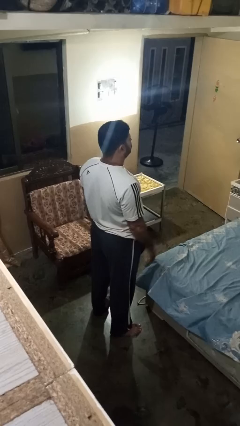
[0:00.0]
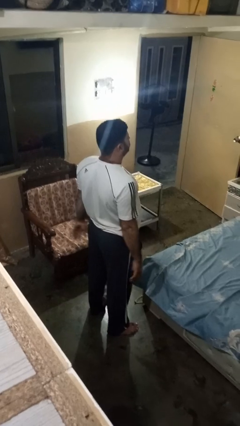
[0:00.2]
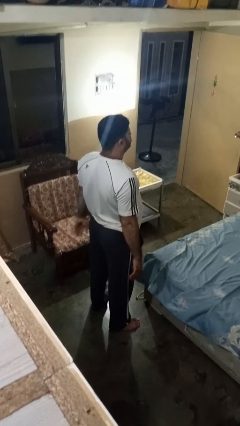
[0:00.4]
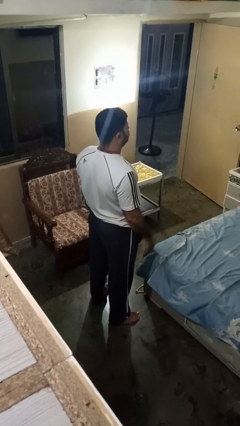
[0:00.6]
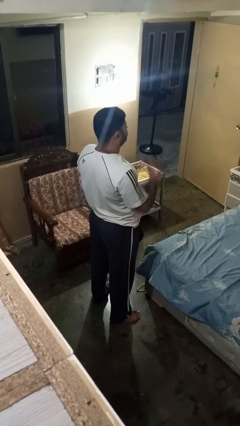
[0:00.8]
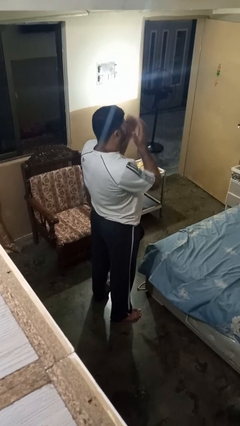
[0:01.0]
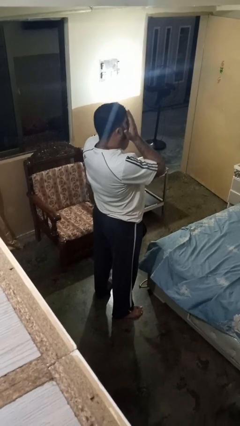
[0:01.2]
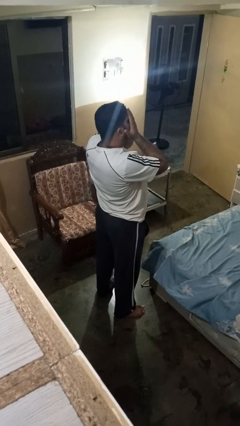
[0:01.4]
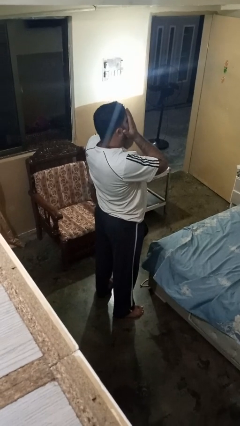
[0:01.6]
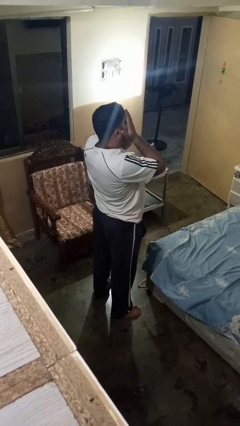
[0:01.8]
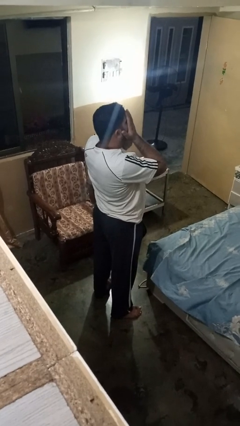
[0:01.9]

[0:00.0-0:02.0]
person covers face with hands

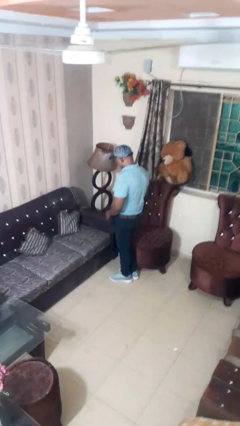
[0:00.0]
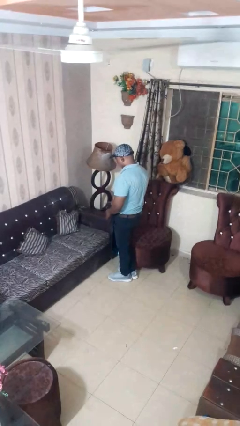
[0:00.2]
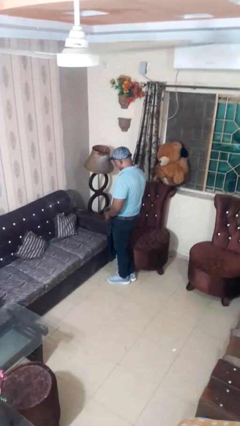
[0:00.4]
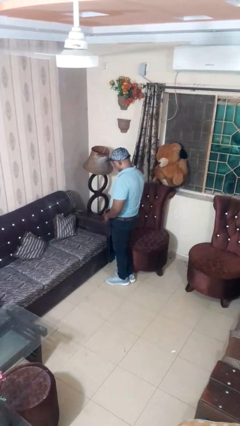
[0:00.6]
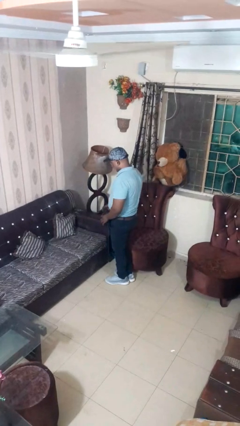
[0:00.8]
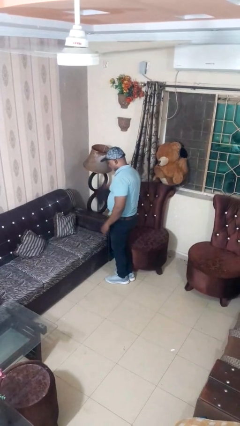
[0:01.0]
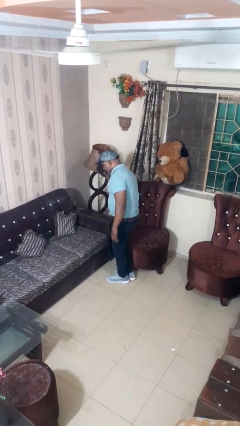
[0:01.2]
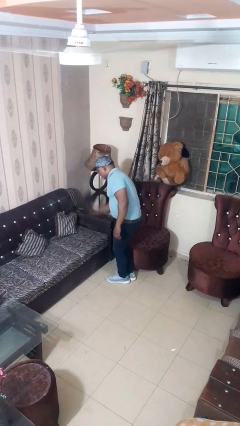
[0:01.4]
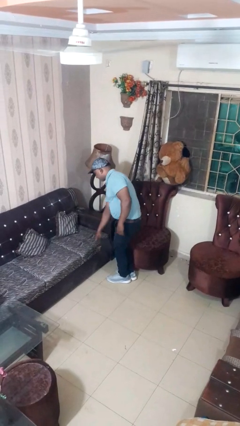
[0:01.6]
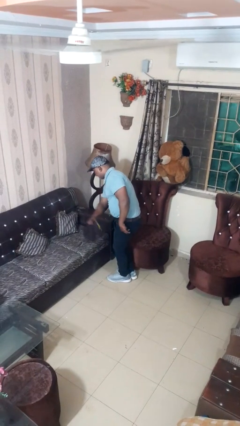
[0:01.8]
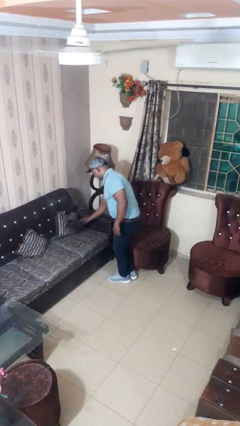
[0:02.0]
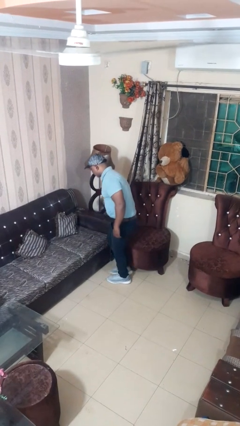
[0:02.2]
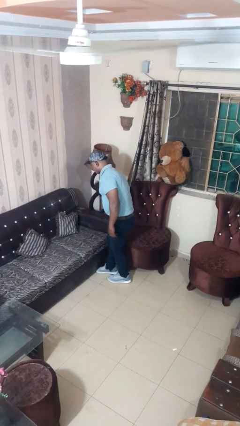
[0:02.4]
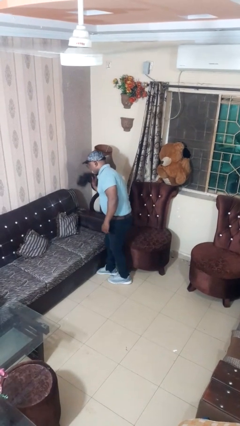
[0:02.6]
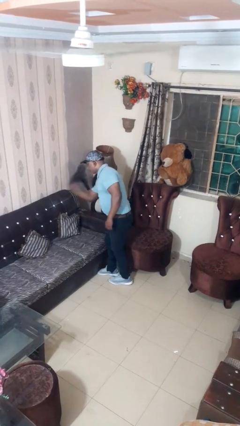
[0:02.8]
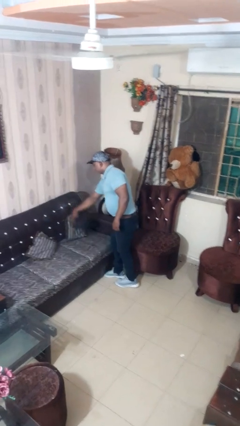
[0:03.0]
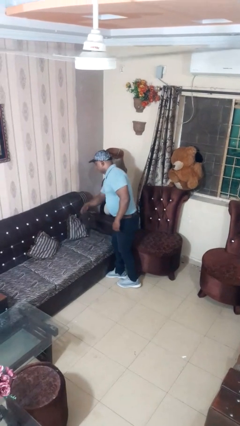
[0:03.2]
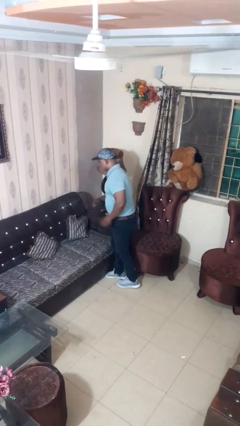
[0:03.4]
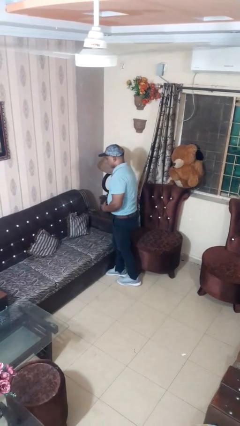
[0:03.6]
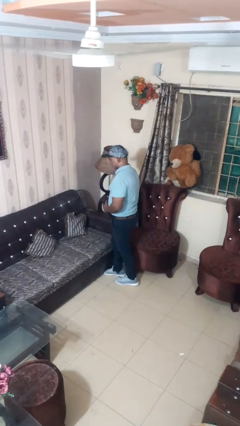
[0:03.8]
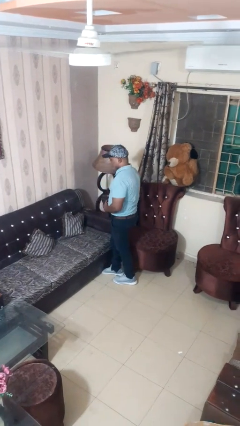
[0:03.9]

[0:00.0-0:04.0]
person dusts furniture

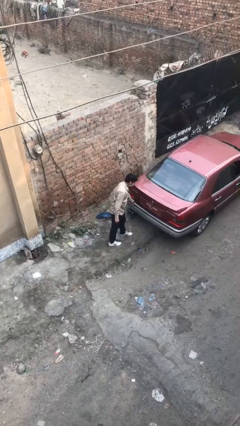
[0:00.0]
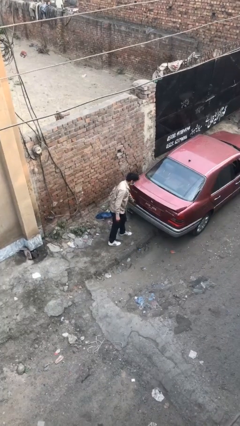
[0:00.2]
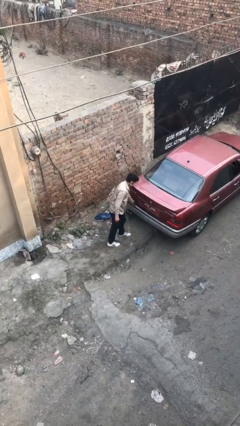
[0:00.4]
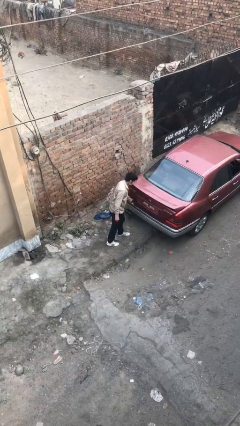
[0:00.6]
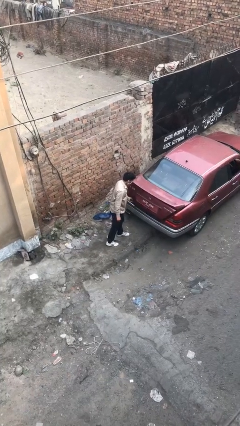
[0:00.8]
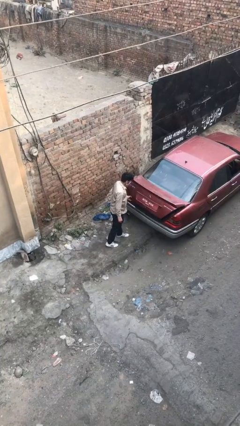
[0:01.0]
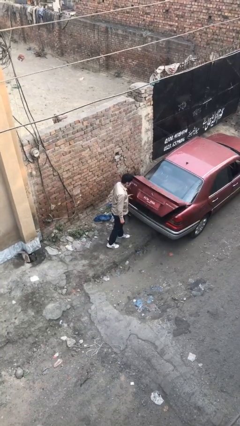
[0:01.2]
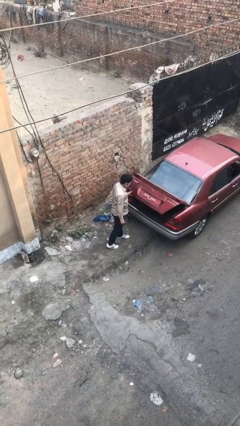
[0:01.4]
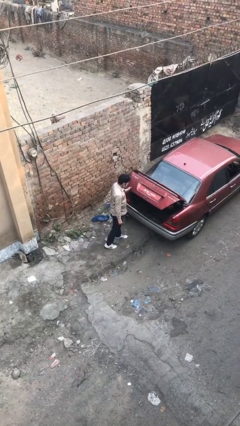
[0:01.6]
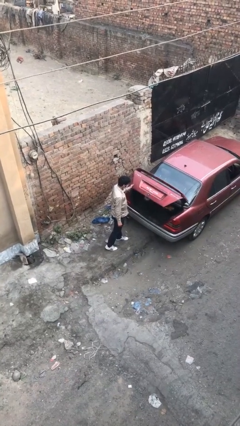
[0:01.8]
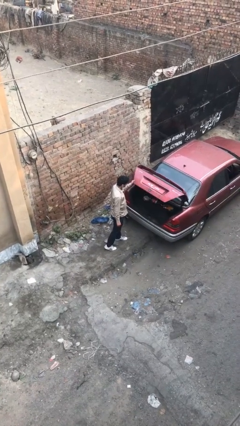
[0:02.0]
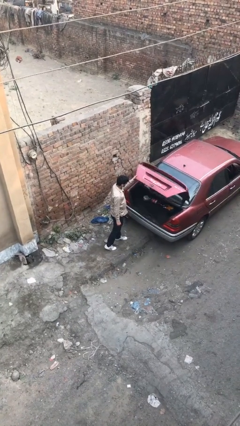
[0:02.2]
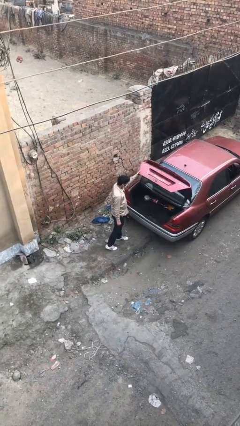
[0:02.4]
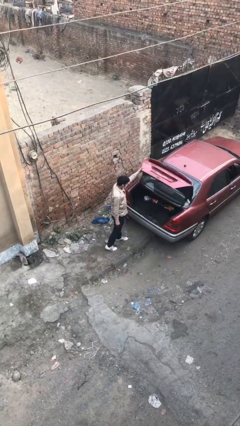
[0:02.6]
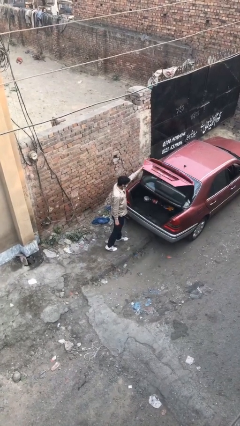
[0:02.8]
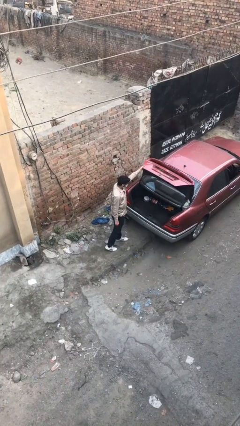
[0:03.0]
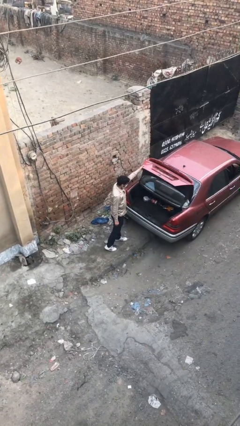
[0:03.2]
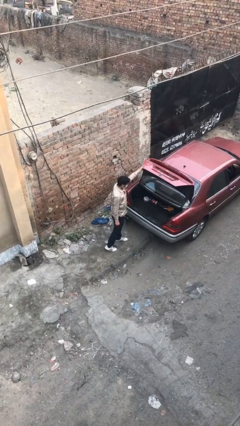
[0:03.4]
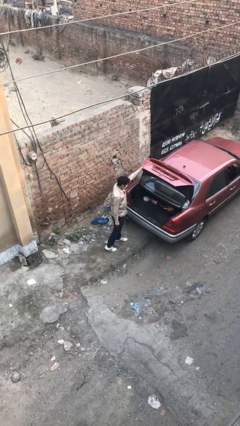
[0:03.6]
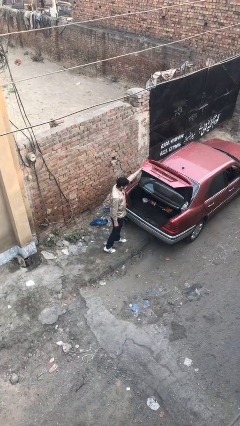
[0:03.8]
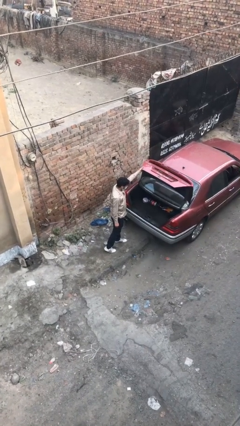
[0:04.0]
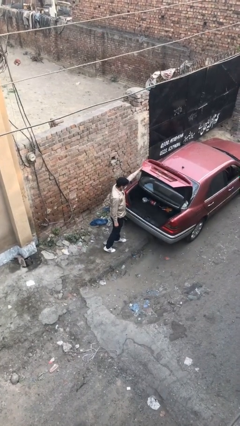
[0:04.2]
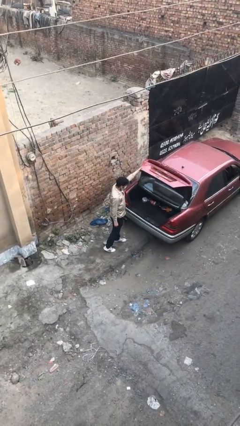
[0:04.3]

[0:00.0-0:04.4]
person opens car trunk

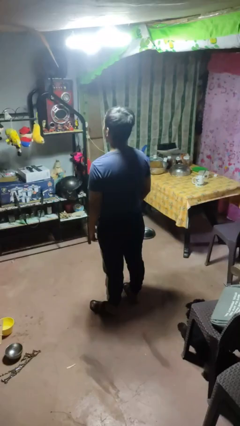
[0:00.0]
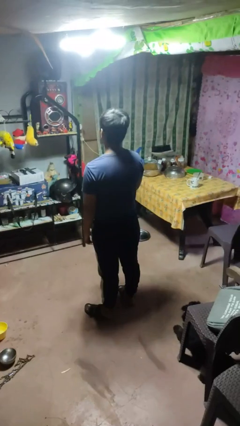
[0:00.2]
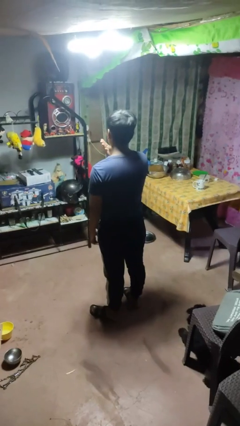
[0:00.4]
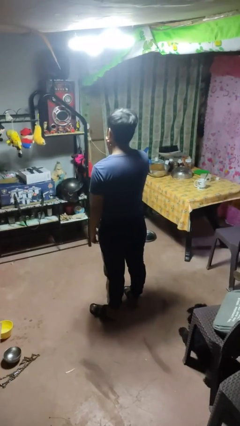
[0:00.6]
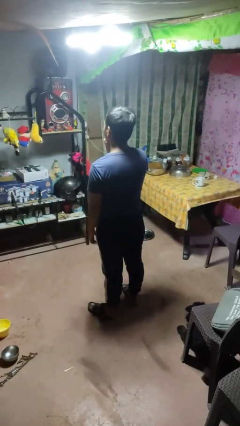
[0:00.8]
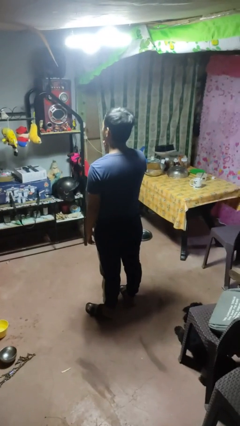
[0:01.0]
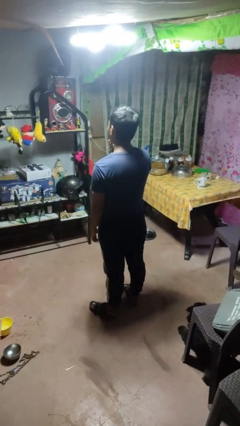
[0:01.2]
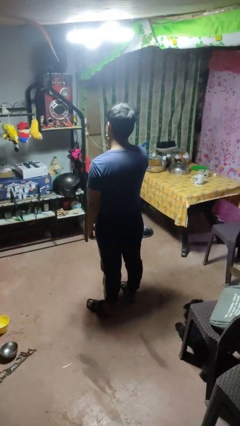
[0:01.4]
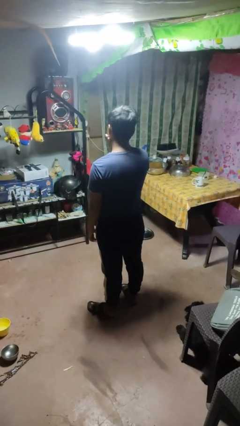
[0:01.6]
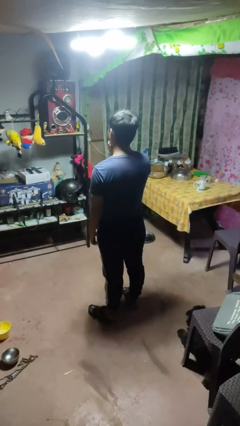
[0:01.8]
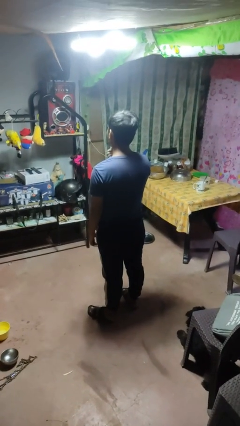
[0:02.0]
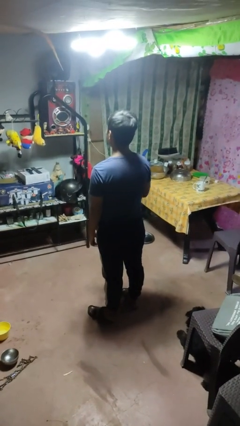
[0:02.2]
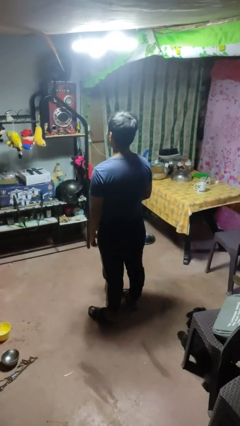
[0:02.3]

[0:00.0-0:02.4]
person strokes chin

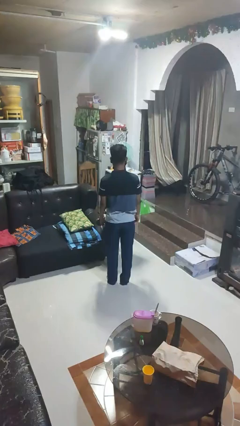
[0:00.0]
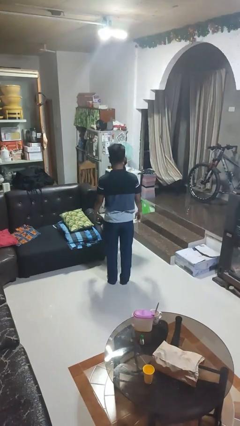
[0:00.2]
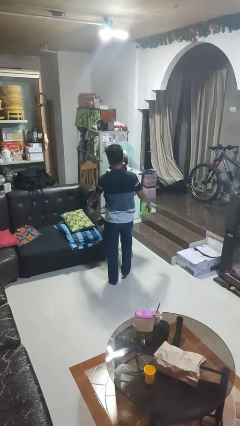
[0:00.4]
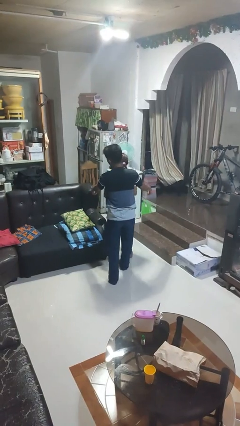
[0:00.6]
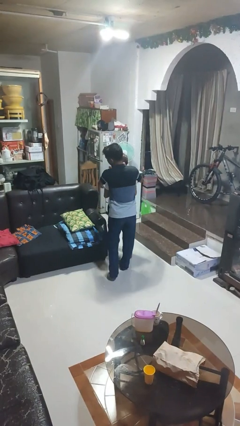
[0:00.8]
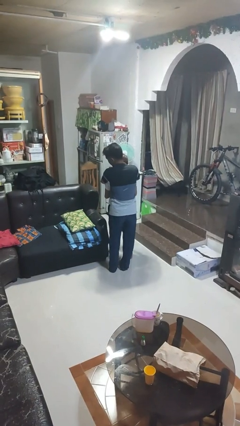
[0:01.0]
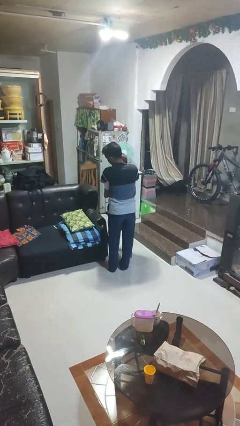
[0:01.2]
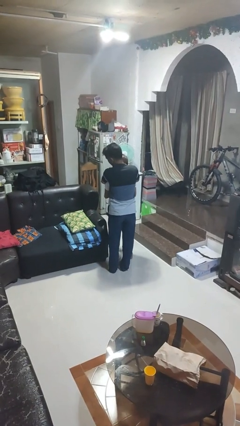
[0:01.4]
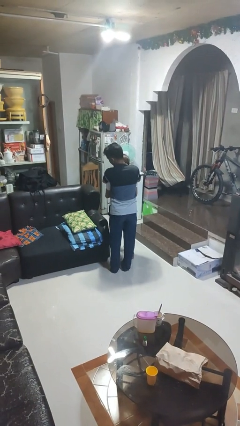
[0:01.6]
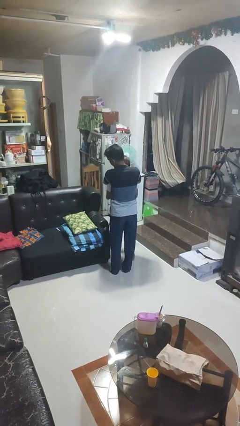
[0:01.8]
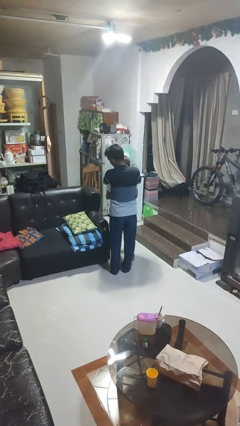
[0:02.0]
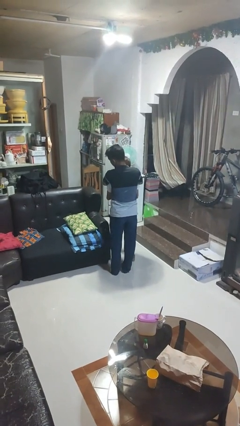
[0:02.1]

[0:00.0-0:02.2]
person hugs person from behind

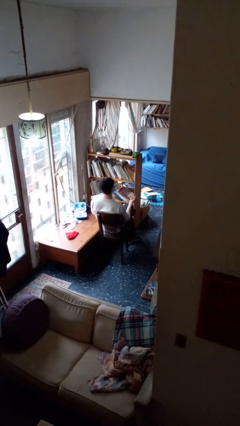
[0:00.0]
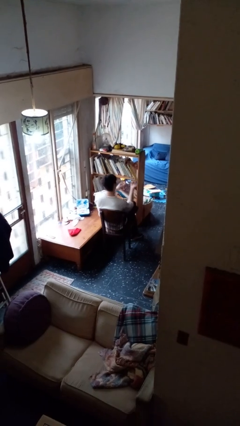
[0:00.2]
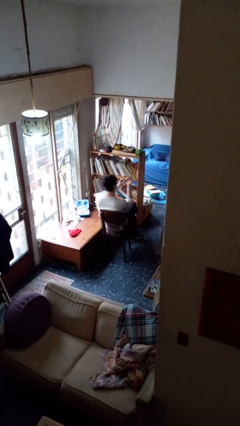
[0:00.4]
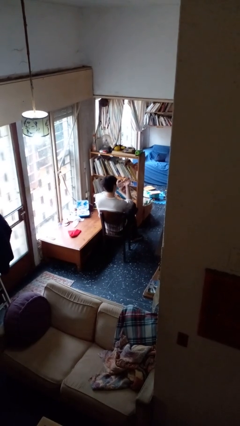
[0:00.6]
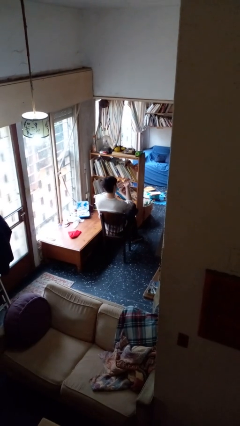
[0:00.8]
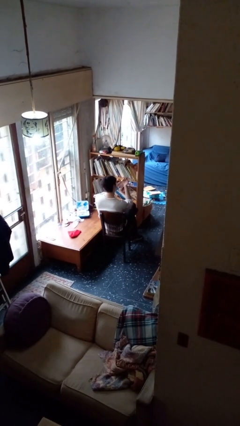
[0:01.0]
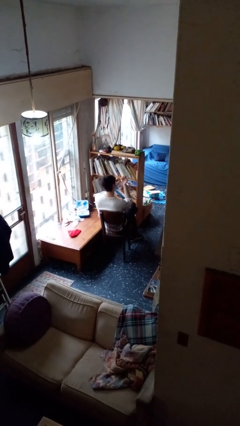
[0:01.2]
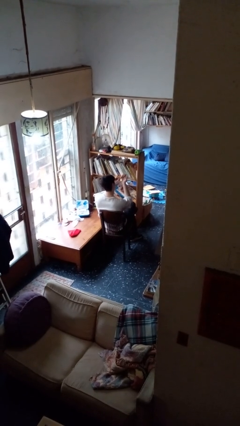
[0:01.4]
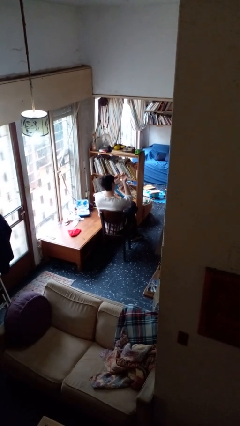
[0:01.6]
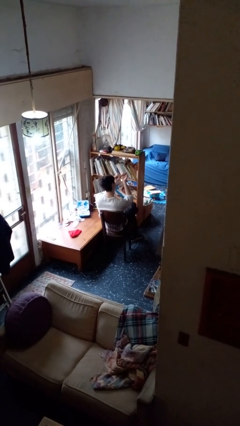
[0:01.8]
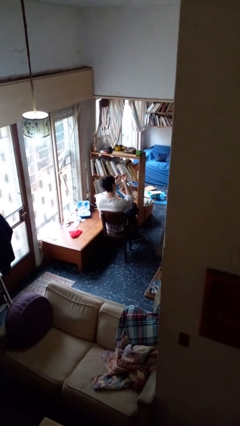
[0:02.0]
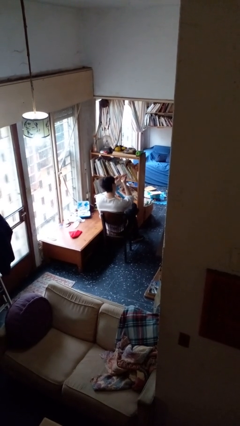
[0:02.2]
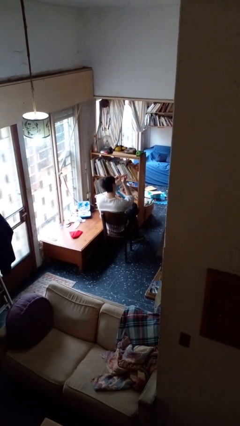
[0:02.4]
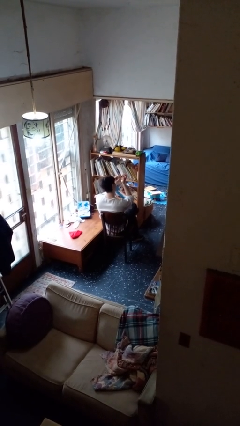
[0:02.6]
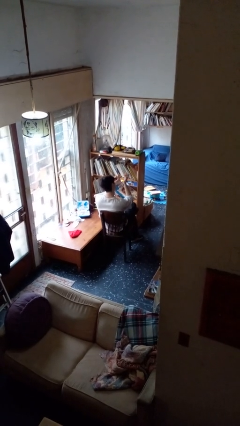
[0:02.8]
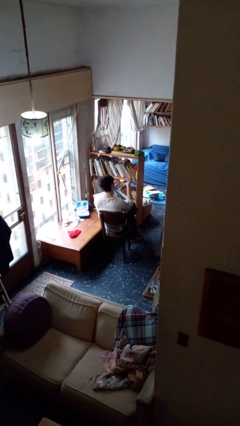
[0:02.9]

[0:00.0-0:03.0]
person files fingernails
